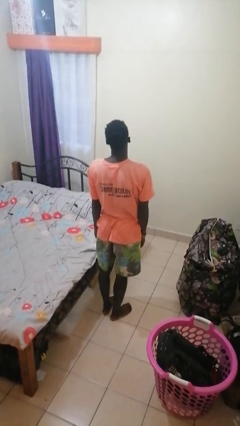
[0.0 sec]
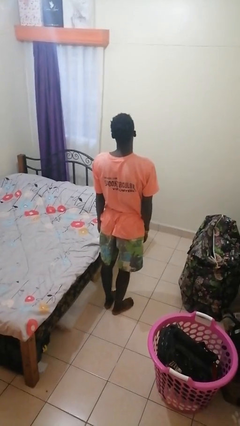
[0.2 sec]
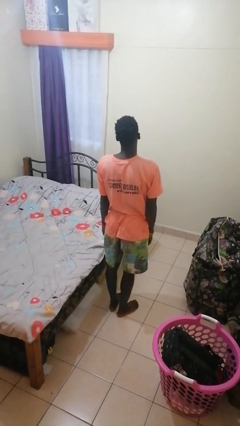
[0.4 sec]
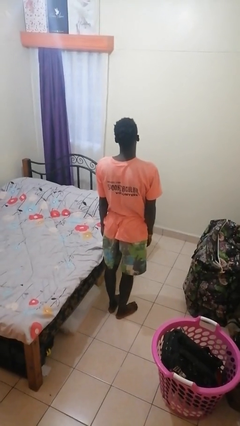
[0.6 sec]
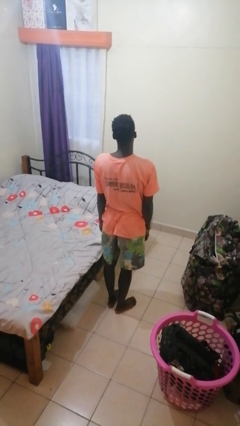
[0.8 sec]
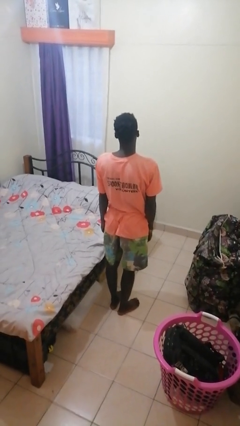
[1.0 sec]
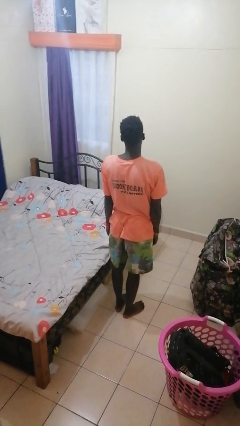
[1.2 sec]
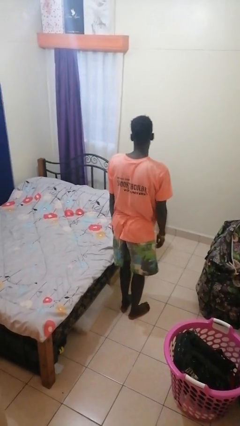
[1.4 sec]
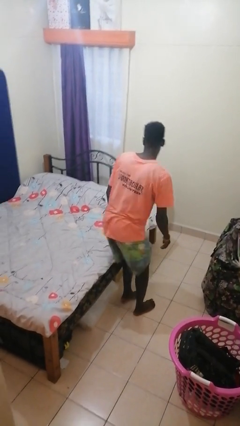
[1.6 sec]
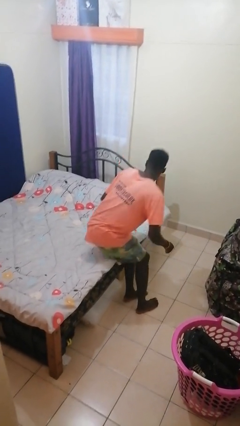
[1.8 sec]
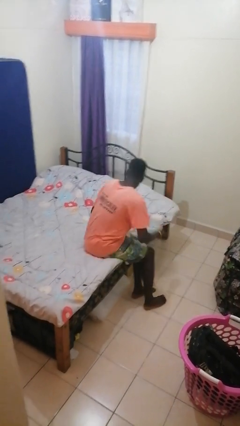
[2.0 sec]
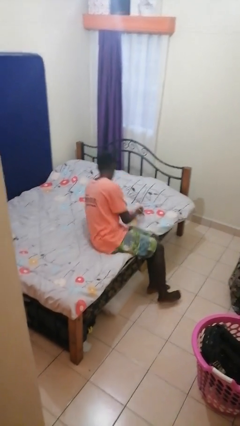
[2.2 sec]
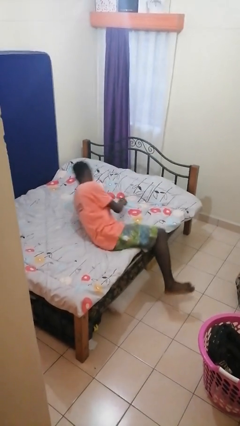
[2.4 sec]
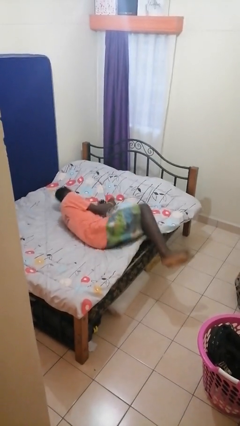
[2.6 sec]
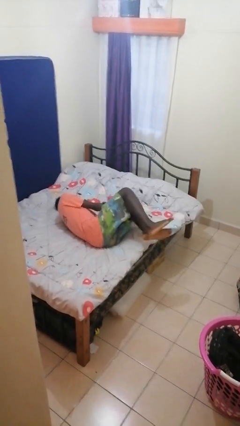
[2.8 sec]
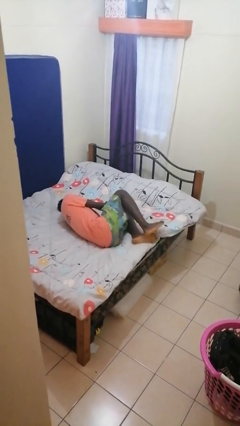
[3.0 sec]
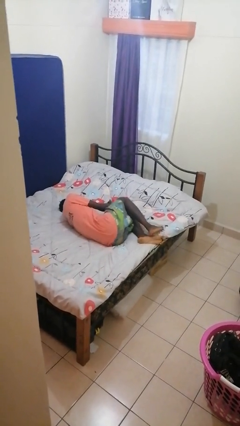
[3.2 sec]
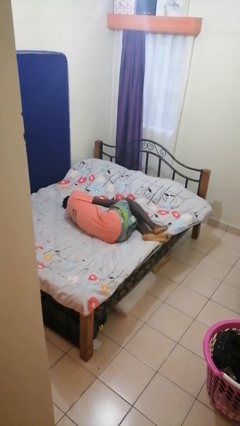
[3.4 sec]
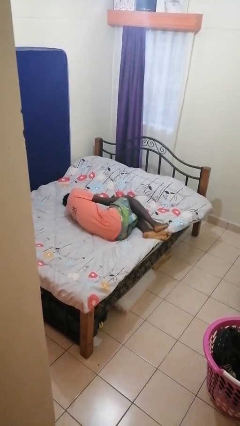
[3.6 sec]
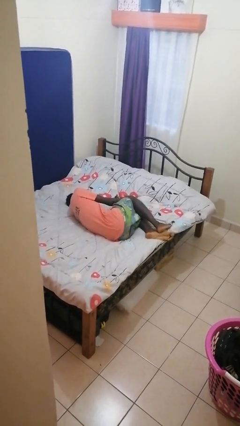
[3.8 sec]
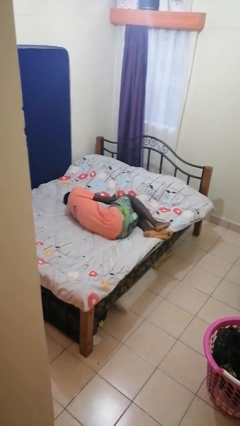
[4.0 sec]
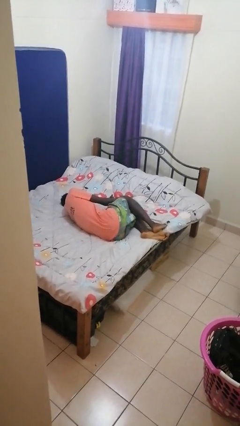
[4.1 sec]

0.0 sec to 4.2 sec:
person takes off shoes

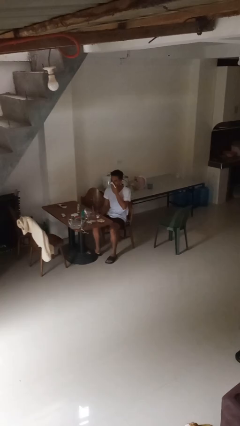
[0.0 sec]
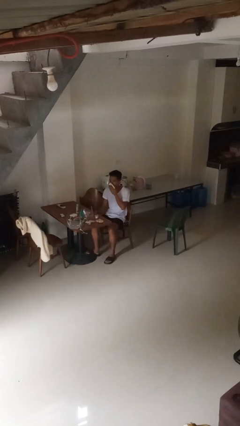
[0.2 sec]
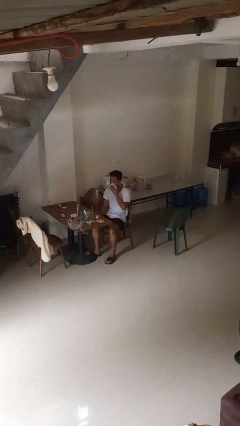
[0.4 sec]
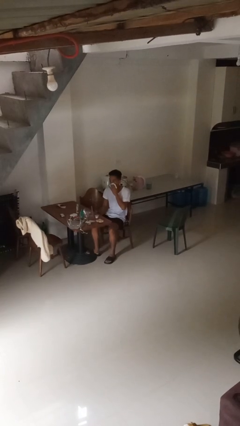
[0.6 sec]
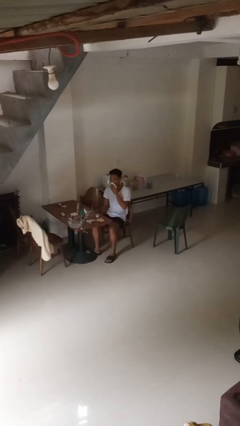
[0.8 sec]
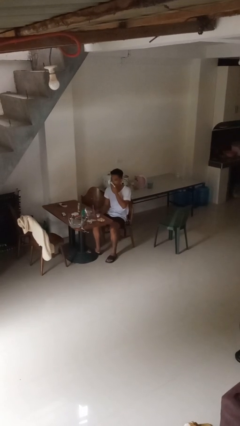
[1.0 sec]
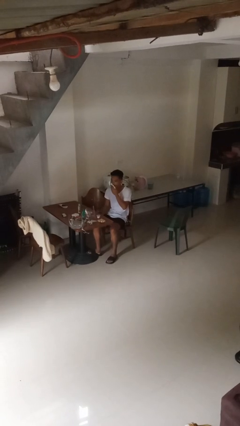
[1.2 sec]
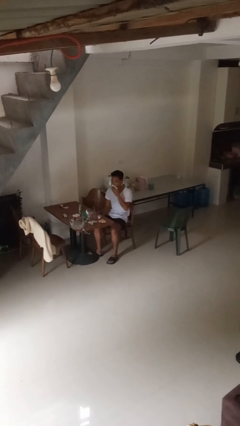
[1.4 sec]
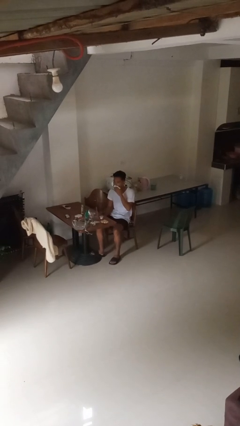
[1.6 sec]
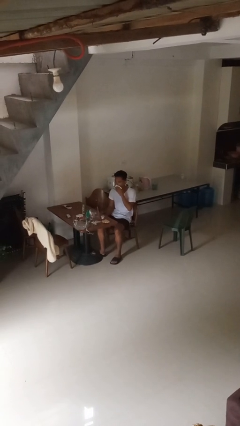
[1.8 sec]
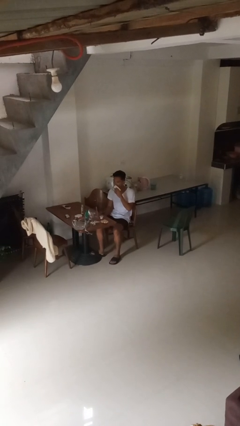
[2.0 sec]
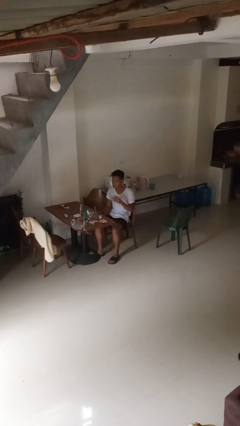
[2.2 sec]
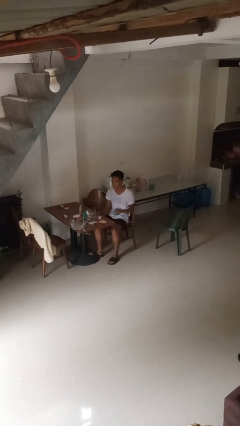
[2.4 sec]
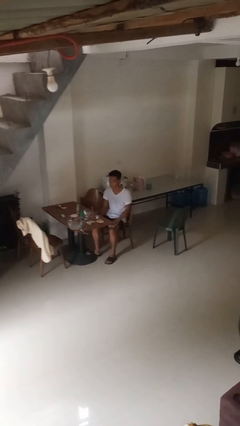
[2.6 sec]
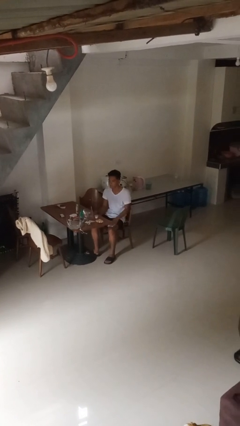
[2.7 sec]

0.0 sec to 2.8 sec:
person wipes mouth with napkin

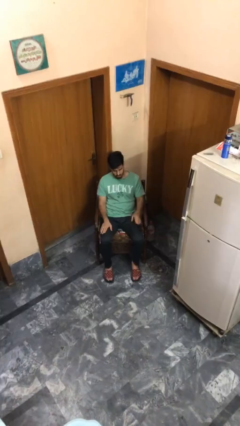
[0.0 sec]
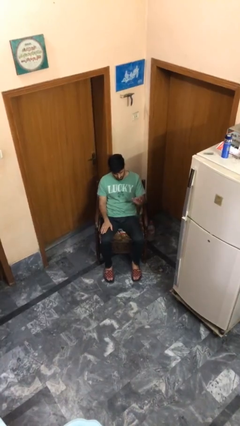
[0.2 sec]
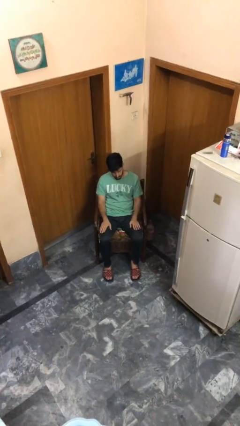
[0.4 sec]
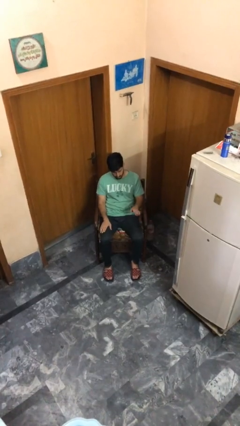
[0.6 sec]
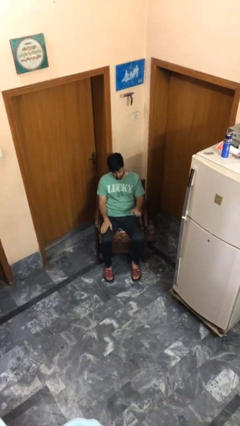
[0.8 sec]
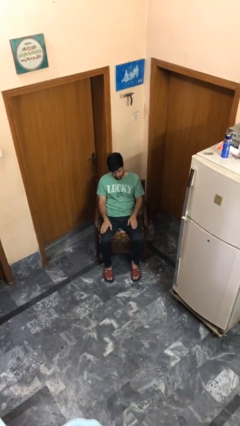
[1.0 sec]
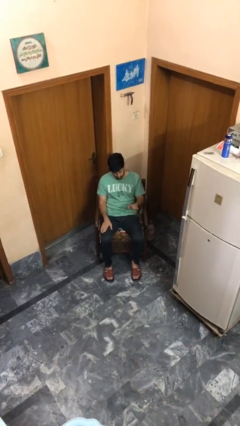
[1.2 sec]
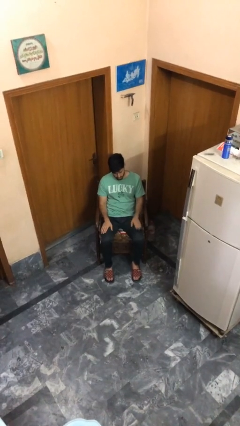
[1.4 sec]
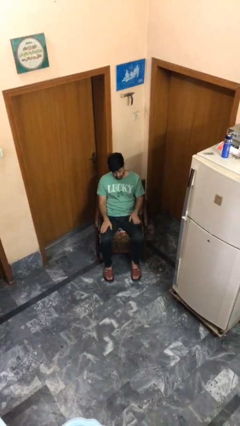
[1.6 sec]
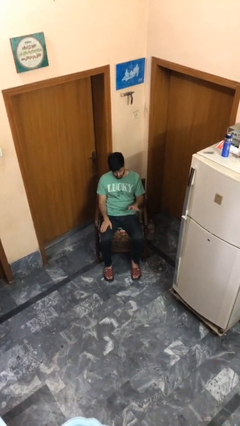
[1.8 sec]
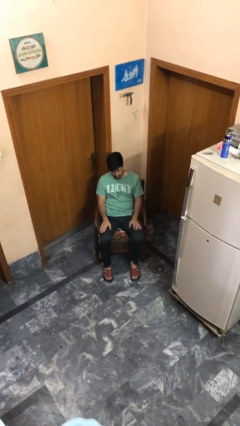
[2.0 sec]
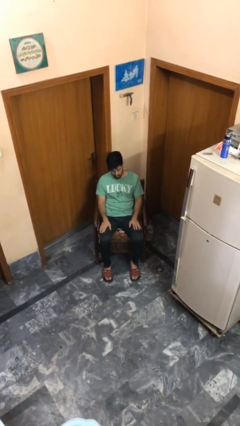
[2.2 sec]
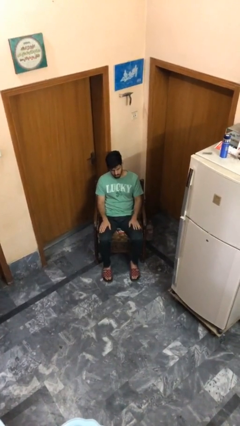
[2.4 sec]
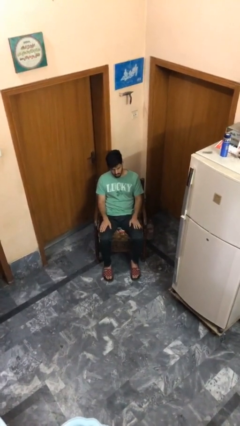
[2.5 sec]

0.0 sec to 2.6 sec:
person slaps hands on thighs

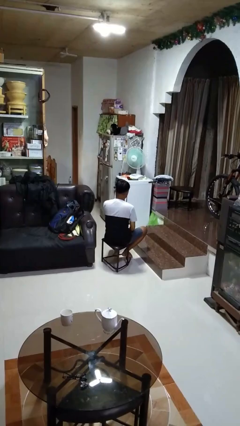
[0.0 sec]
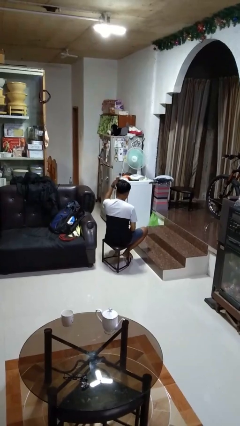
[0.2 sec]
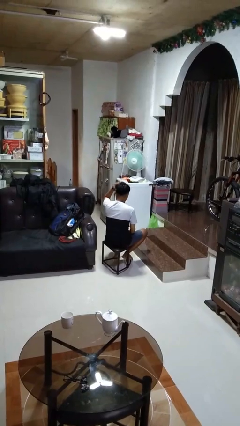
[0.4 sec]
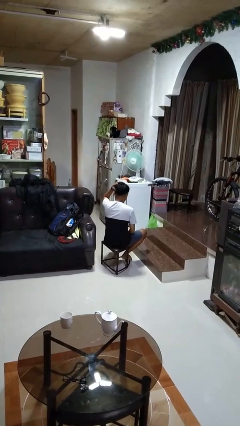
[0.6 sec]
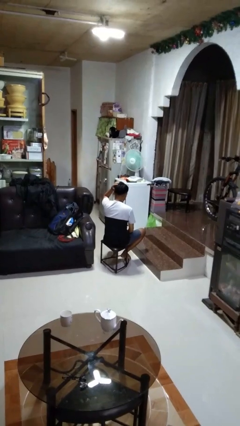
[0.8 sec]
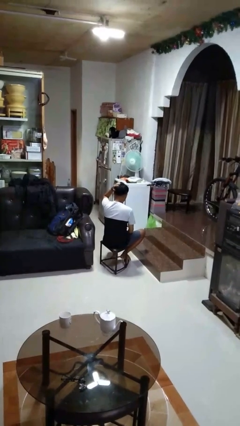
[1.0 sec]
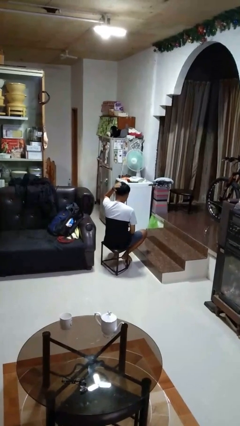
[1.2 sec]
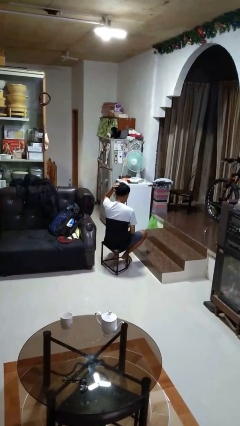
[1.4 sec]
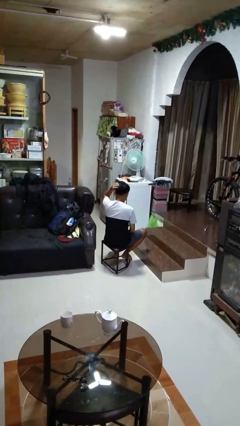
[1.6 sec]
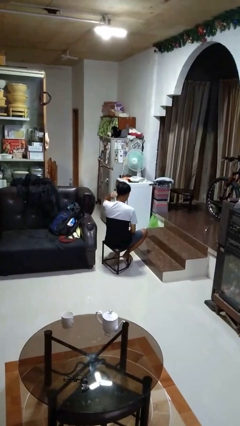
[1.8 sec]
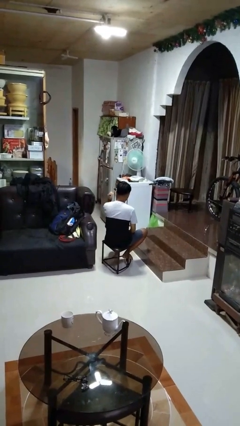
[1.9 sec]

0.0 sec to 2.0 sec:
person pats head

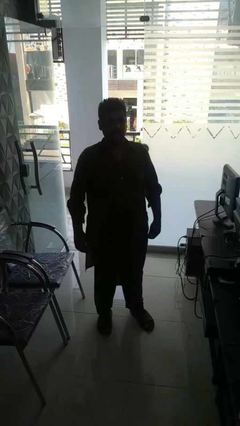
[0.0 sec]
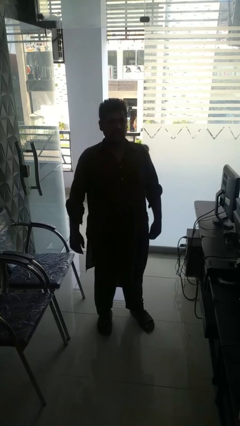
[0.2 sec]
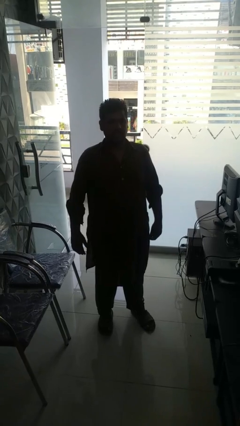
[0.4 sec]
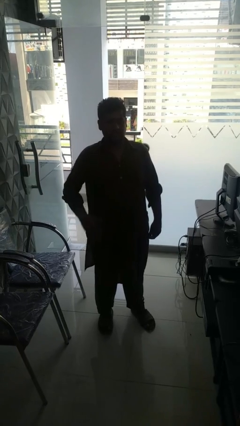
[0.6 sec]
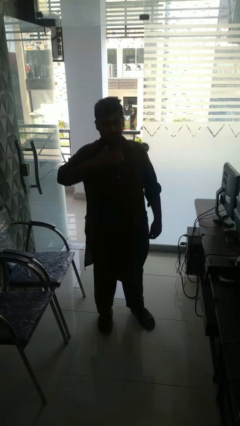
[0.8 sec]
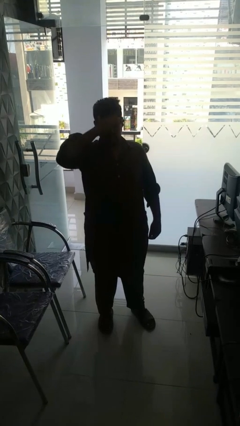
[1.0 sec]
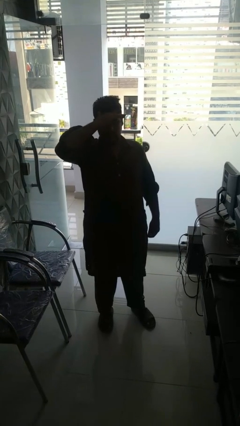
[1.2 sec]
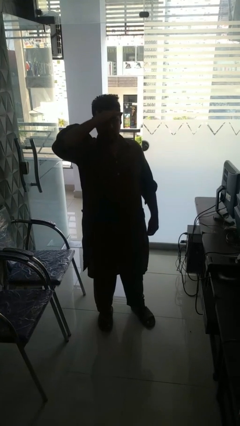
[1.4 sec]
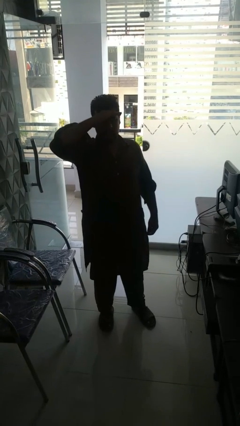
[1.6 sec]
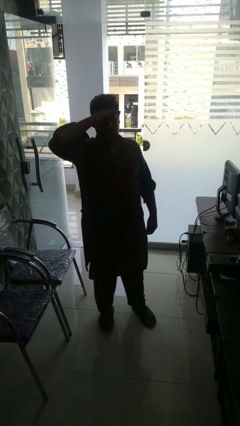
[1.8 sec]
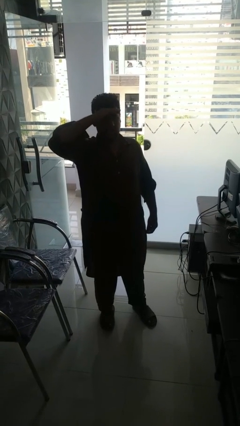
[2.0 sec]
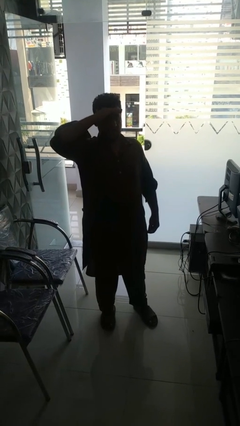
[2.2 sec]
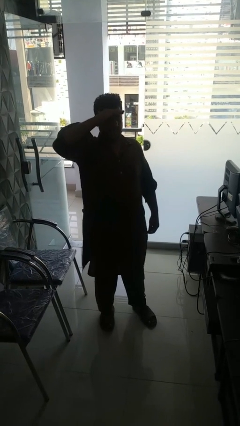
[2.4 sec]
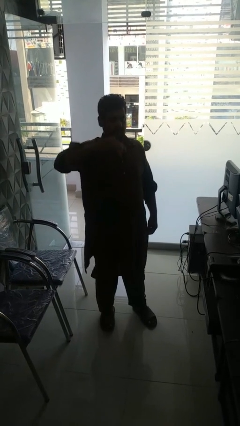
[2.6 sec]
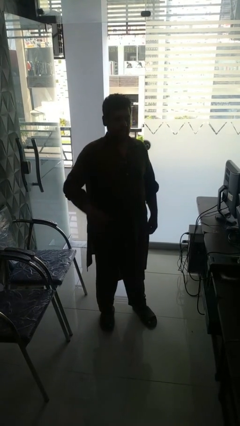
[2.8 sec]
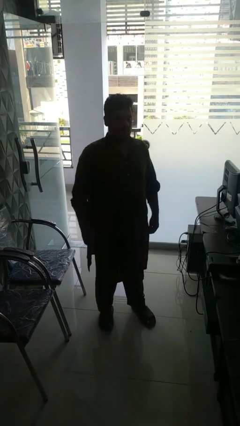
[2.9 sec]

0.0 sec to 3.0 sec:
person shades eyes

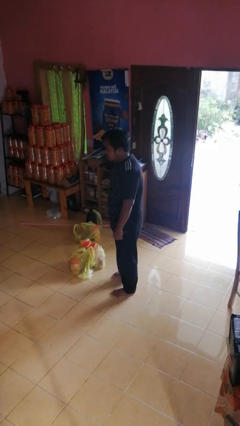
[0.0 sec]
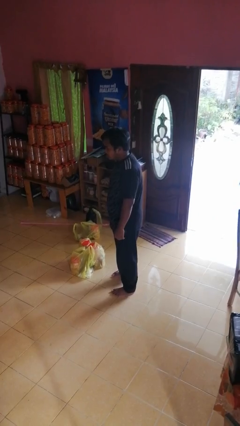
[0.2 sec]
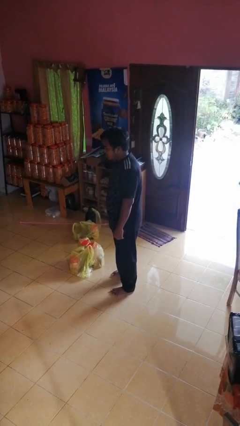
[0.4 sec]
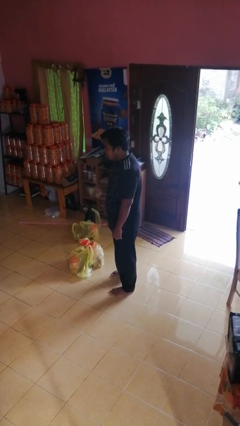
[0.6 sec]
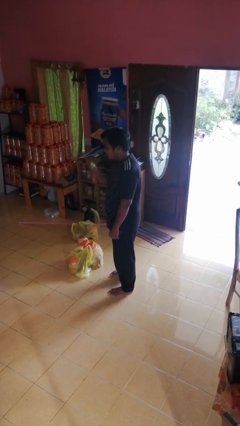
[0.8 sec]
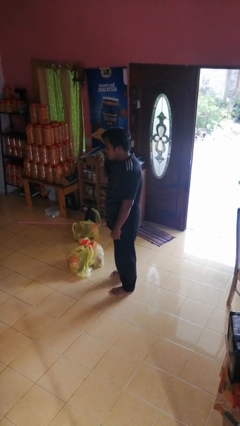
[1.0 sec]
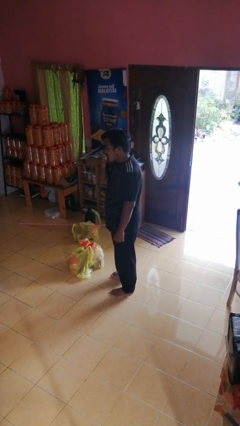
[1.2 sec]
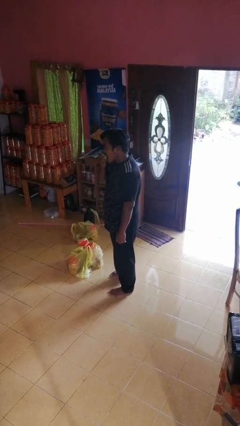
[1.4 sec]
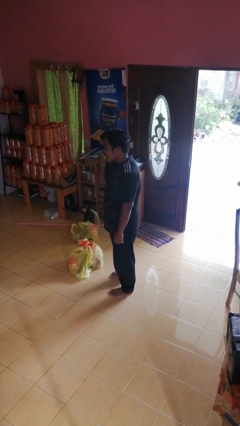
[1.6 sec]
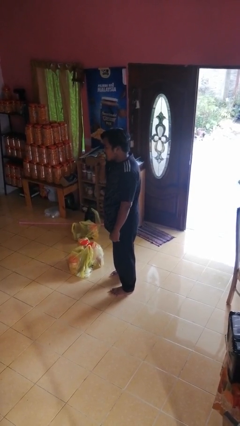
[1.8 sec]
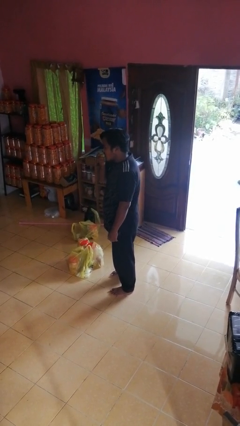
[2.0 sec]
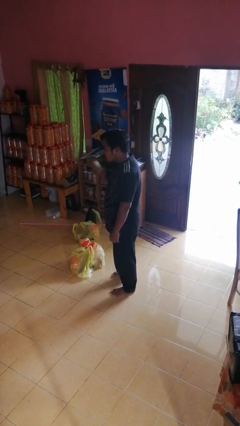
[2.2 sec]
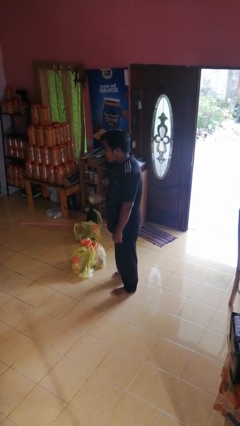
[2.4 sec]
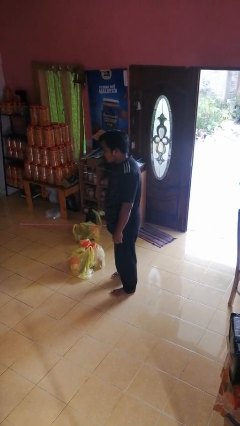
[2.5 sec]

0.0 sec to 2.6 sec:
person eats apple
